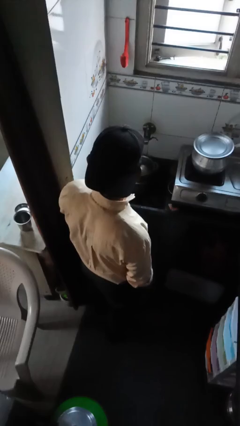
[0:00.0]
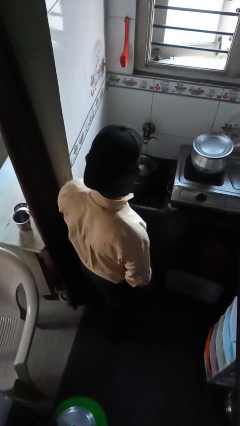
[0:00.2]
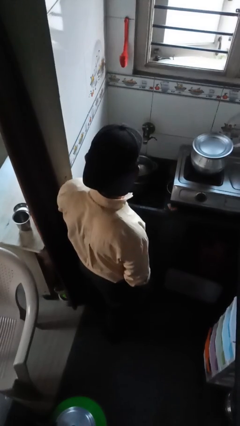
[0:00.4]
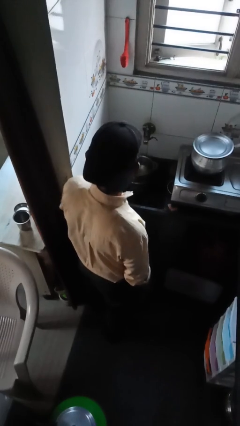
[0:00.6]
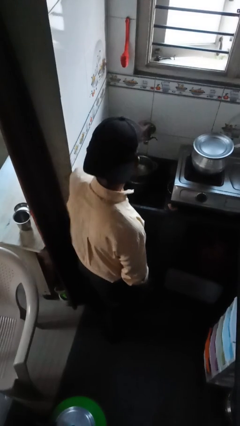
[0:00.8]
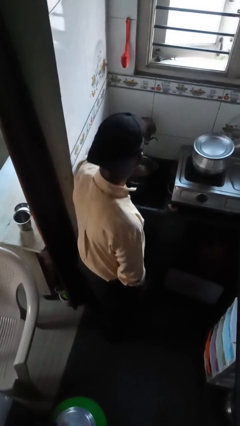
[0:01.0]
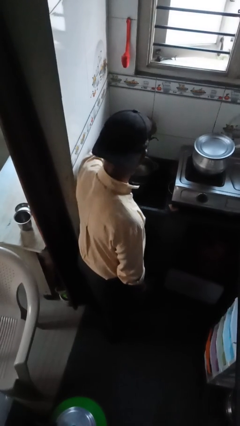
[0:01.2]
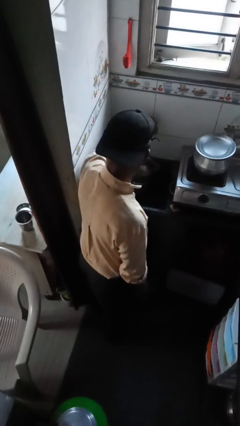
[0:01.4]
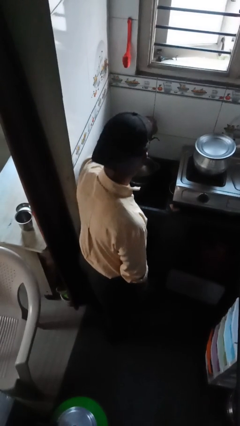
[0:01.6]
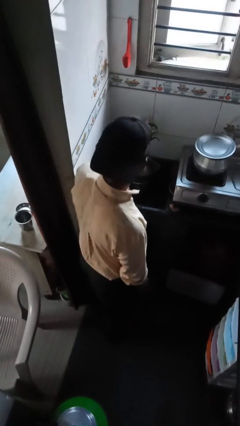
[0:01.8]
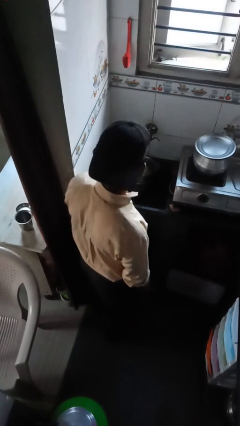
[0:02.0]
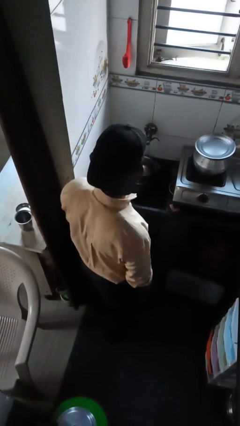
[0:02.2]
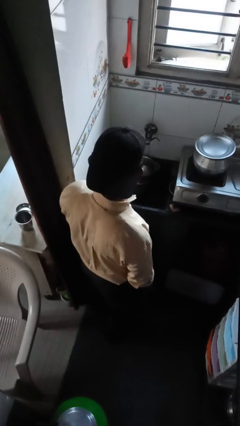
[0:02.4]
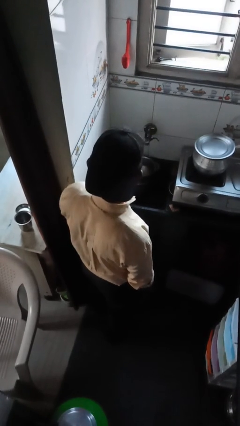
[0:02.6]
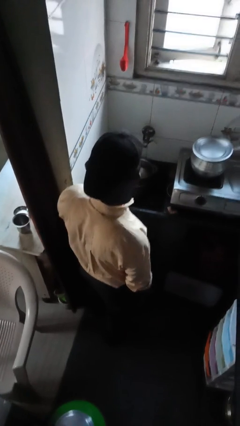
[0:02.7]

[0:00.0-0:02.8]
person turns on faucet

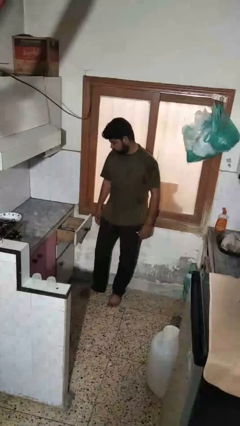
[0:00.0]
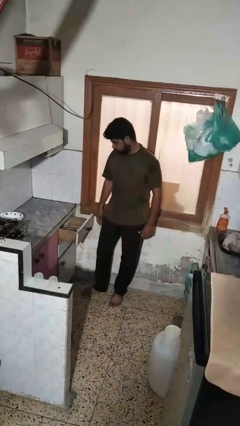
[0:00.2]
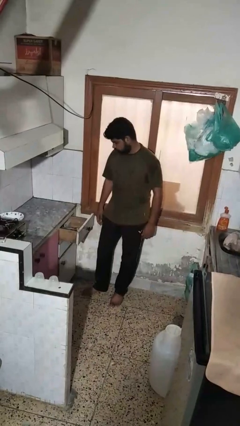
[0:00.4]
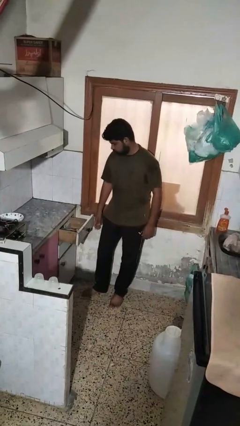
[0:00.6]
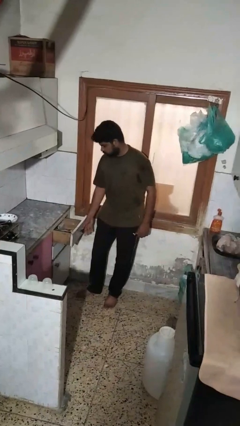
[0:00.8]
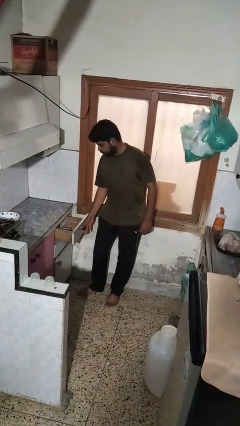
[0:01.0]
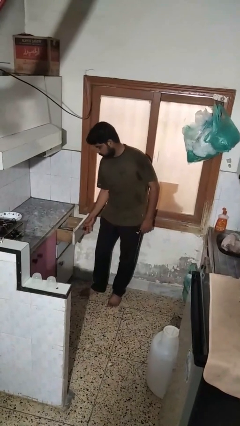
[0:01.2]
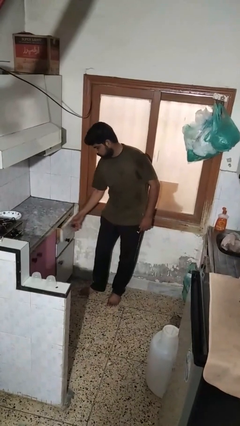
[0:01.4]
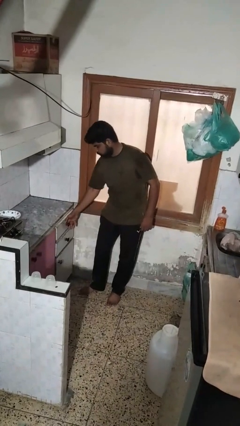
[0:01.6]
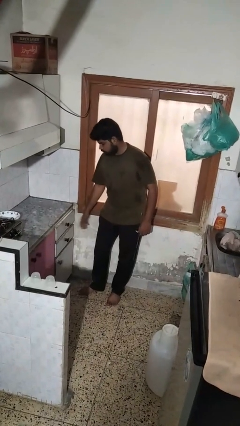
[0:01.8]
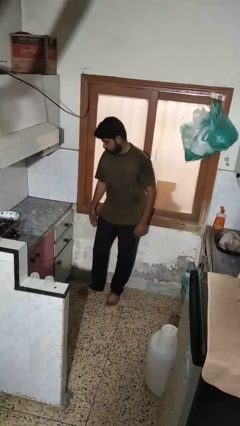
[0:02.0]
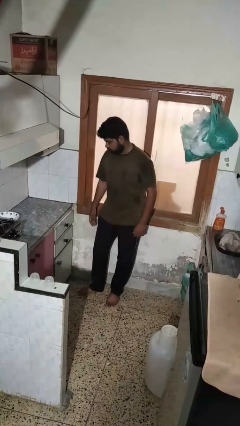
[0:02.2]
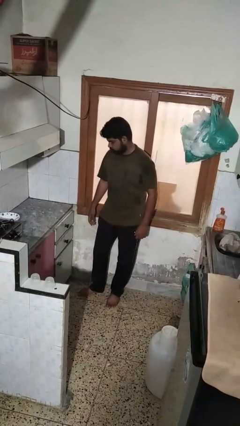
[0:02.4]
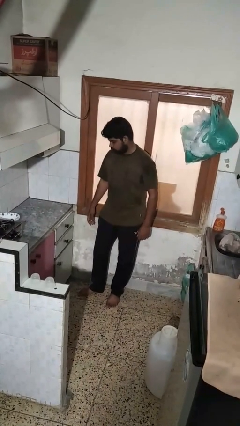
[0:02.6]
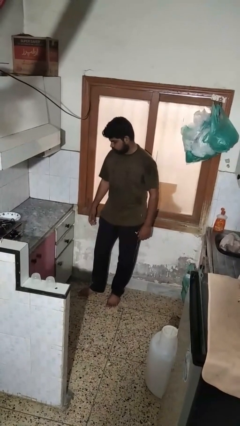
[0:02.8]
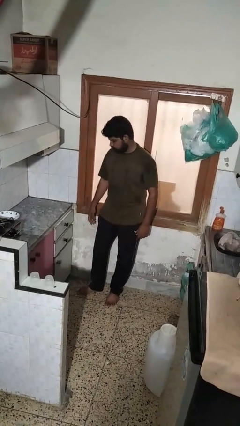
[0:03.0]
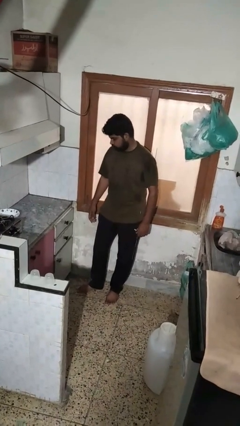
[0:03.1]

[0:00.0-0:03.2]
person closes kitchen drawer
